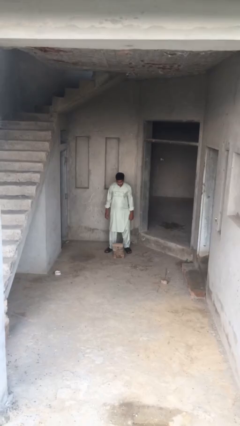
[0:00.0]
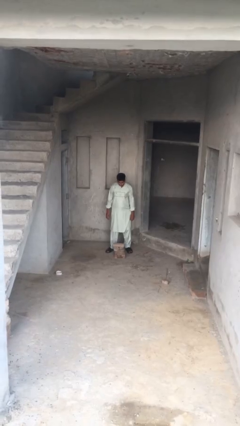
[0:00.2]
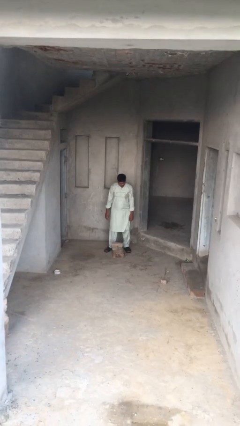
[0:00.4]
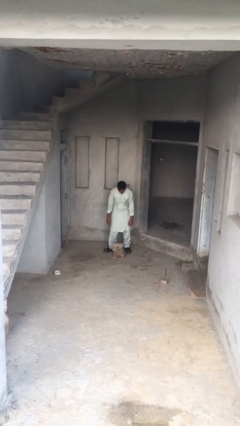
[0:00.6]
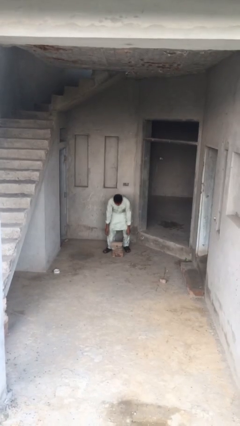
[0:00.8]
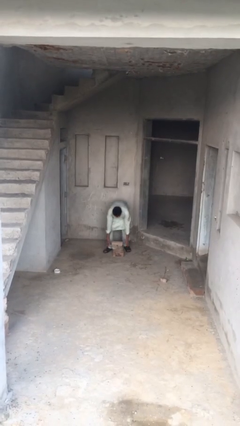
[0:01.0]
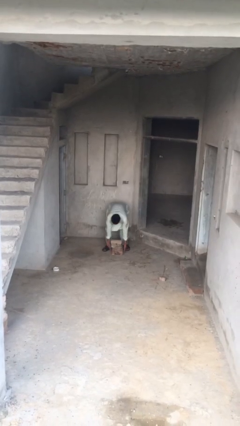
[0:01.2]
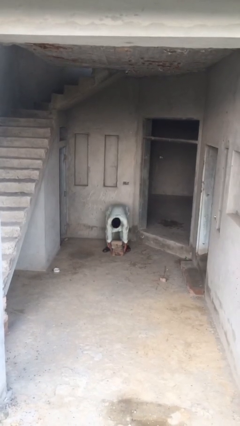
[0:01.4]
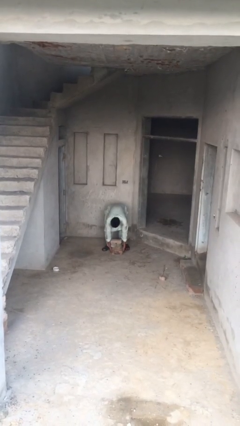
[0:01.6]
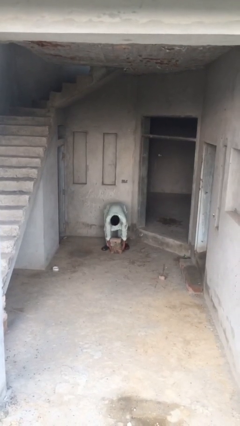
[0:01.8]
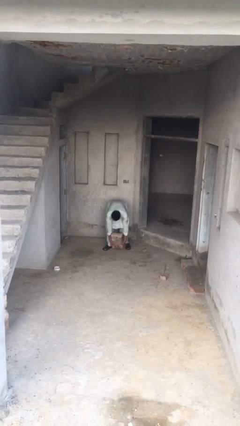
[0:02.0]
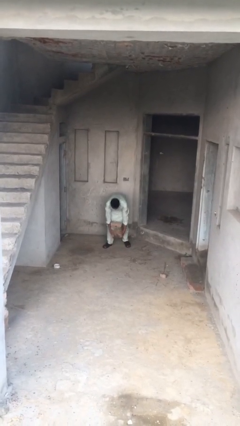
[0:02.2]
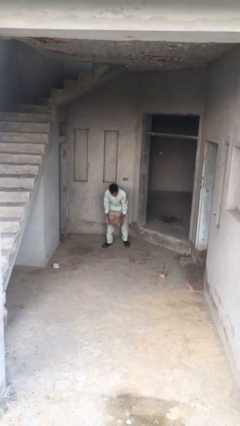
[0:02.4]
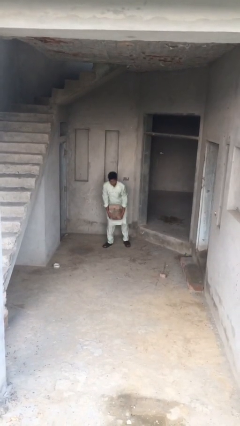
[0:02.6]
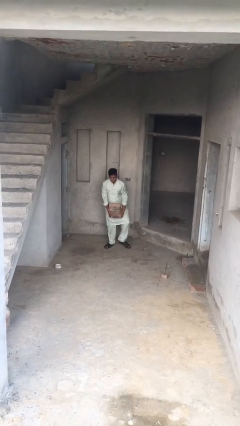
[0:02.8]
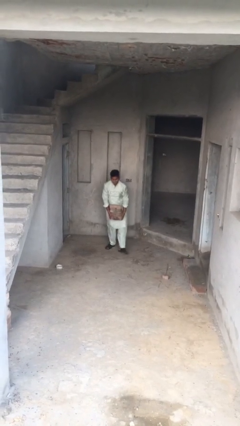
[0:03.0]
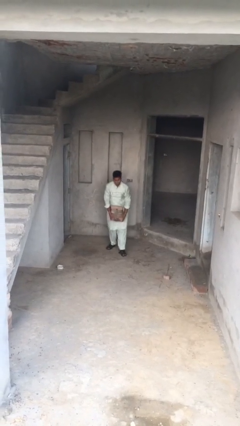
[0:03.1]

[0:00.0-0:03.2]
person picks up object from floor

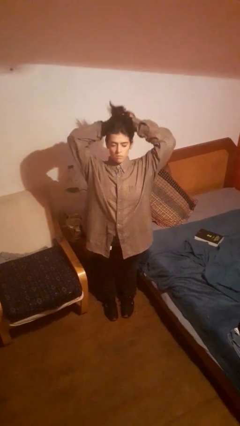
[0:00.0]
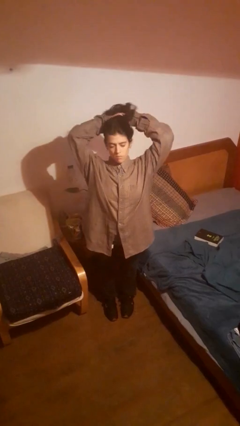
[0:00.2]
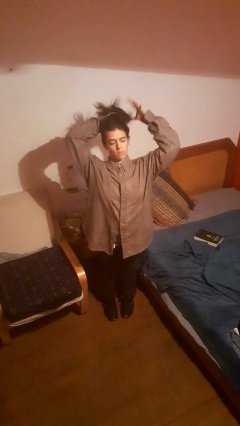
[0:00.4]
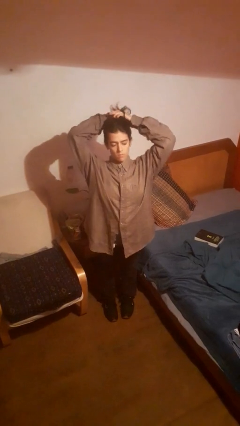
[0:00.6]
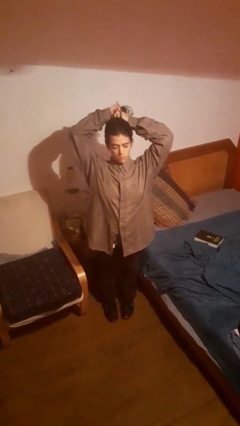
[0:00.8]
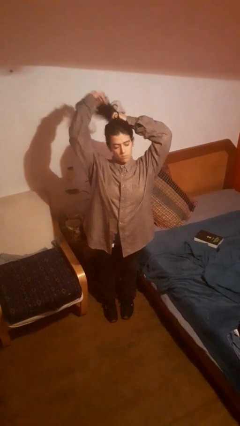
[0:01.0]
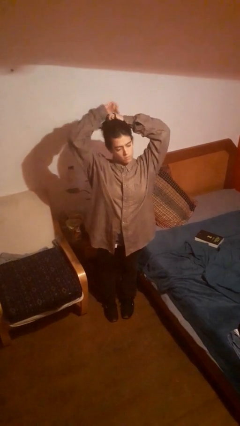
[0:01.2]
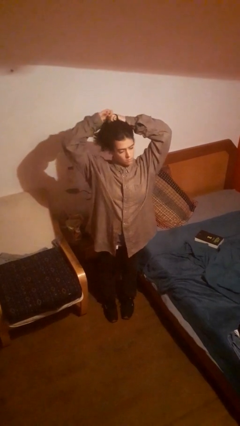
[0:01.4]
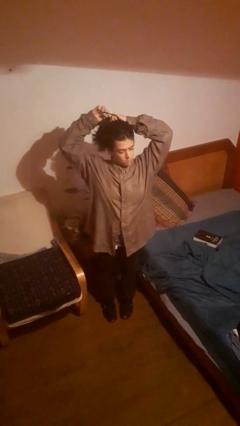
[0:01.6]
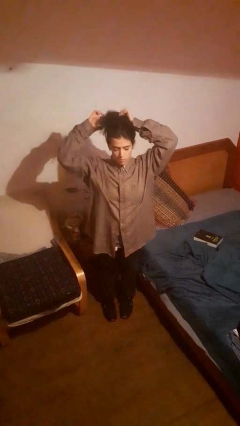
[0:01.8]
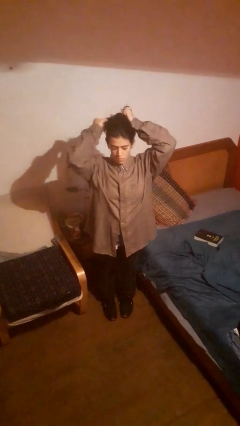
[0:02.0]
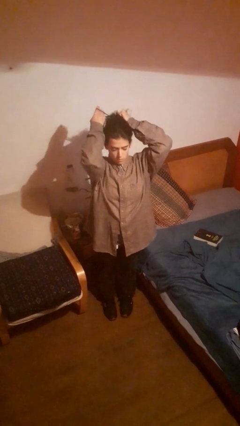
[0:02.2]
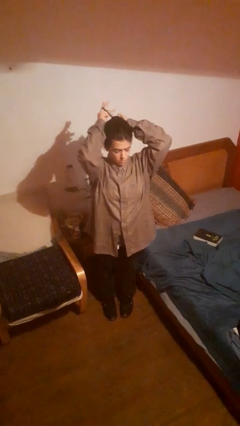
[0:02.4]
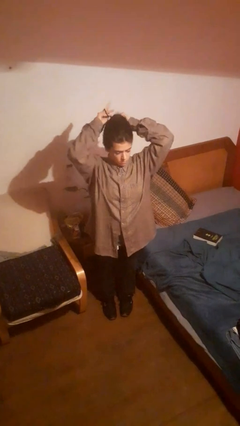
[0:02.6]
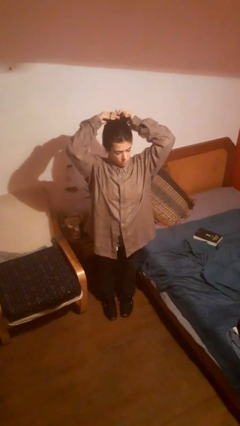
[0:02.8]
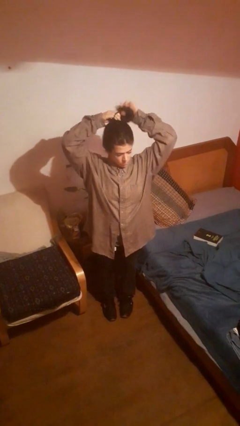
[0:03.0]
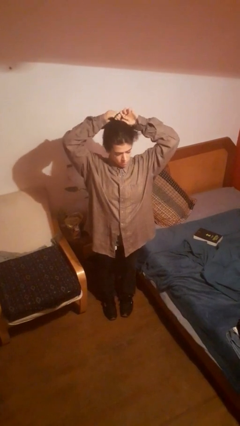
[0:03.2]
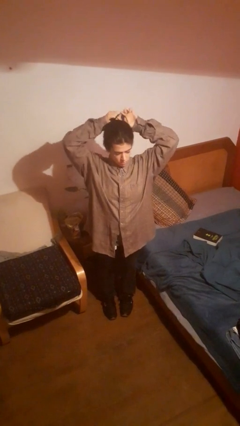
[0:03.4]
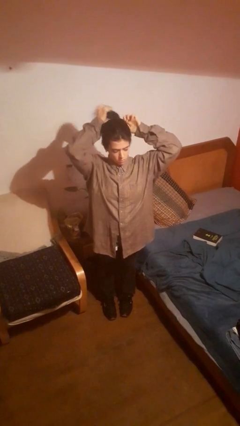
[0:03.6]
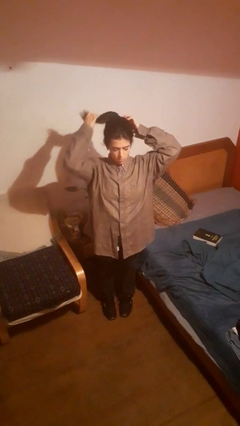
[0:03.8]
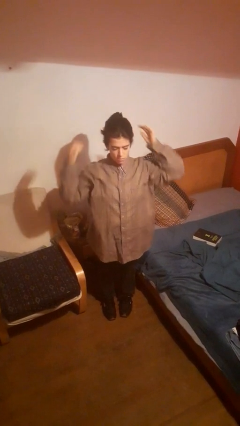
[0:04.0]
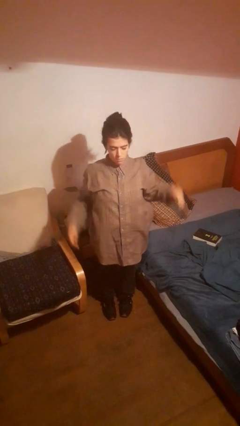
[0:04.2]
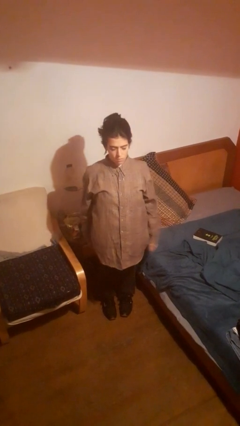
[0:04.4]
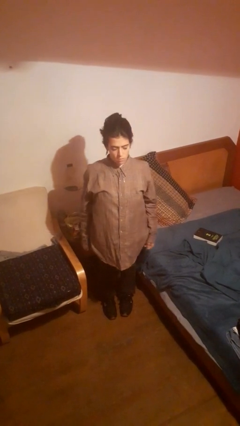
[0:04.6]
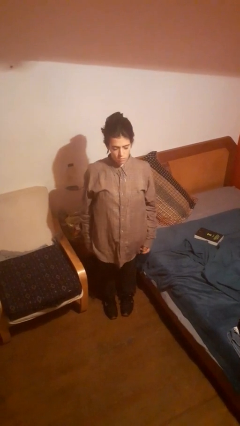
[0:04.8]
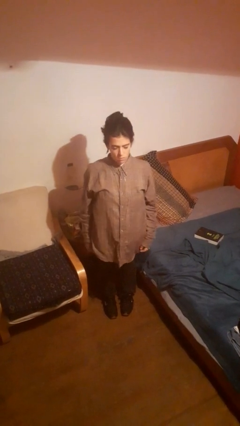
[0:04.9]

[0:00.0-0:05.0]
person puts hair in ponytail

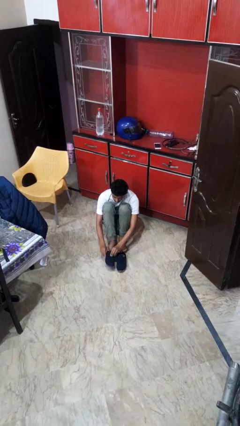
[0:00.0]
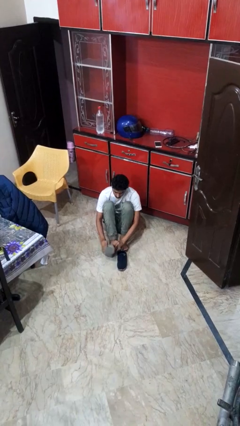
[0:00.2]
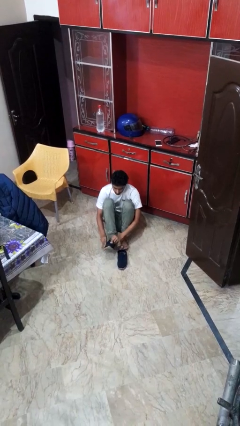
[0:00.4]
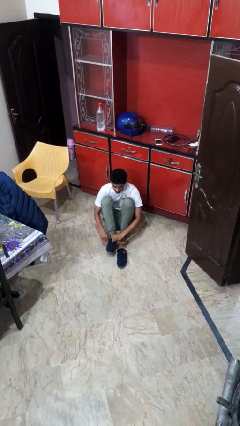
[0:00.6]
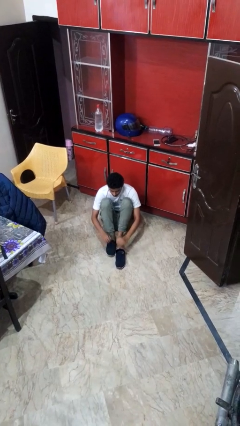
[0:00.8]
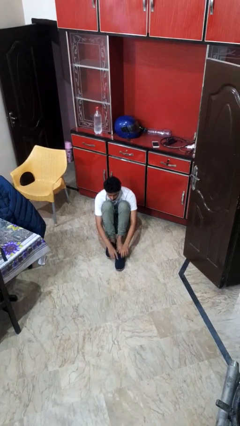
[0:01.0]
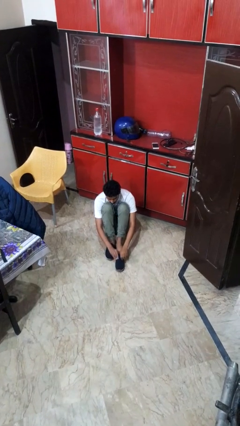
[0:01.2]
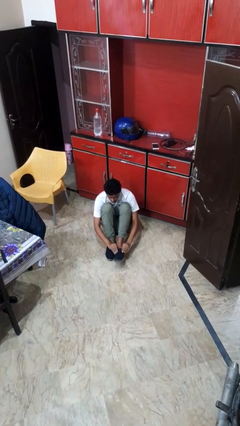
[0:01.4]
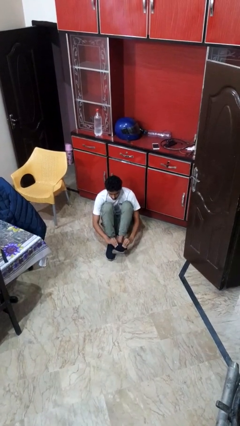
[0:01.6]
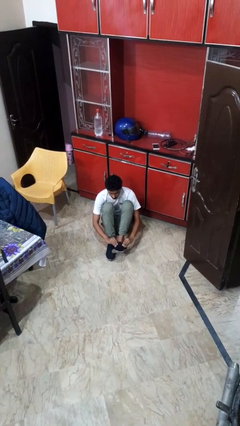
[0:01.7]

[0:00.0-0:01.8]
person puts on shoes

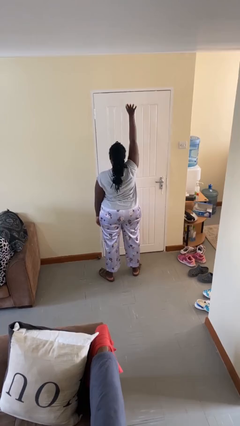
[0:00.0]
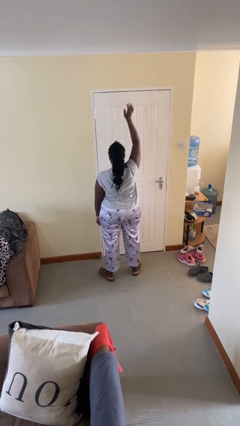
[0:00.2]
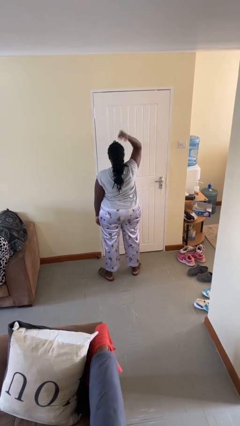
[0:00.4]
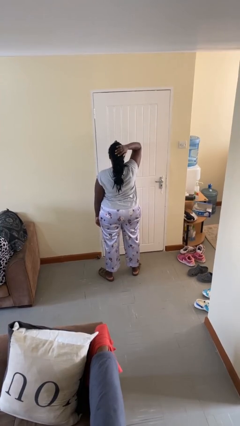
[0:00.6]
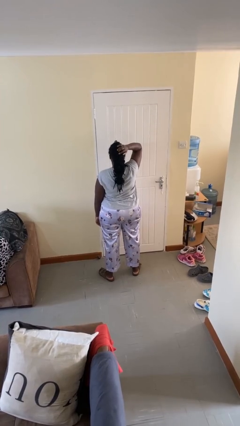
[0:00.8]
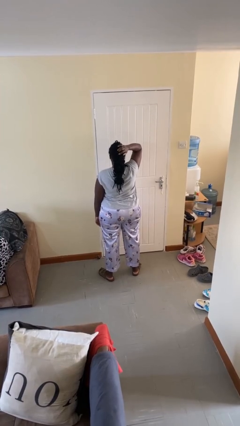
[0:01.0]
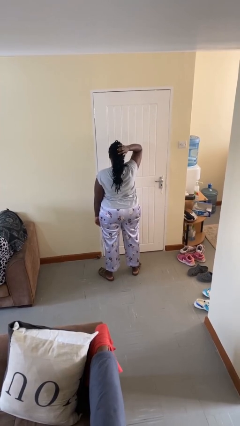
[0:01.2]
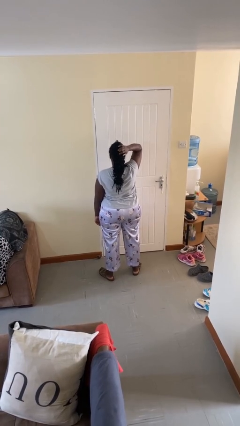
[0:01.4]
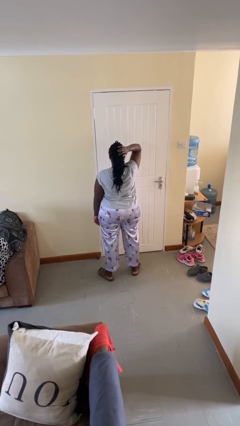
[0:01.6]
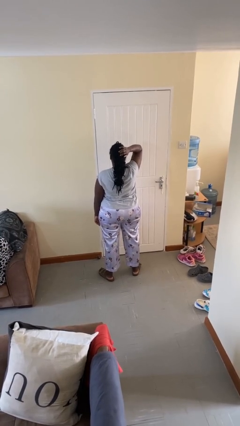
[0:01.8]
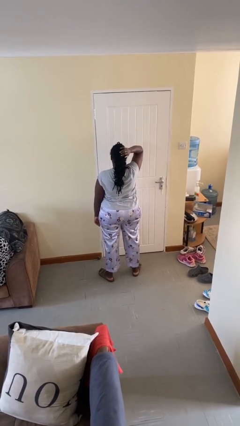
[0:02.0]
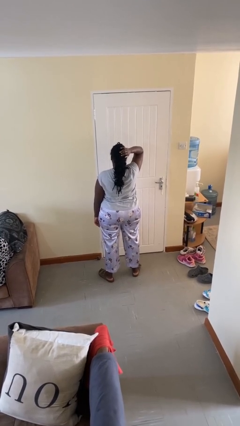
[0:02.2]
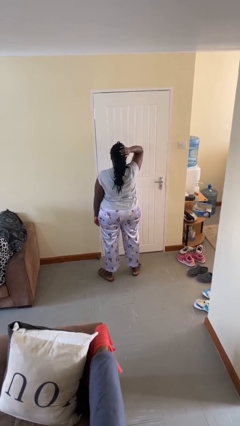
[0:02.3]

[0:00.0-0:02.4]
person gestures lower hand

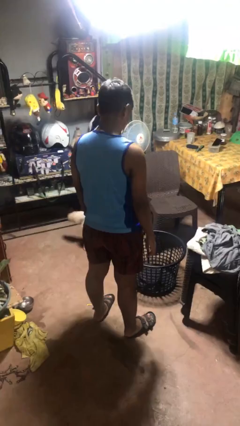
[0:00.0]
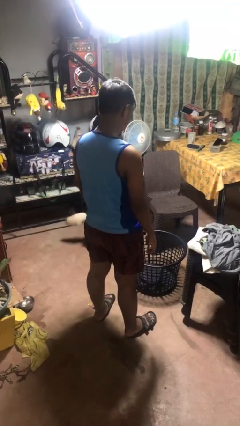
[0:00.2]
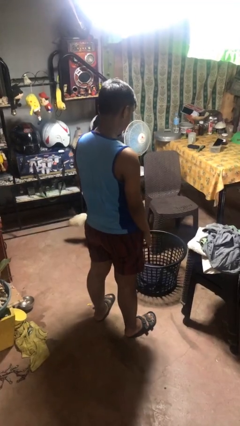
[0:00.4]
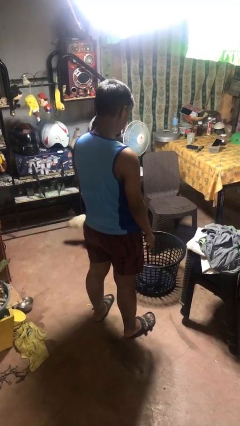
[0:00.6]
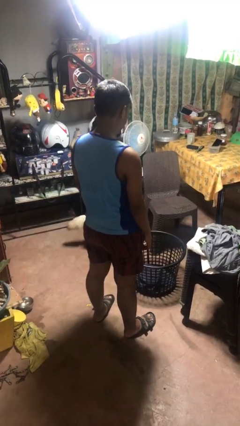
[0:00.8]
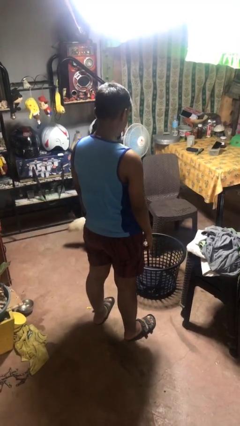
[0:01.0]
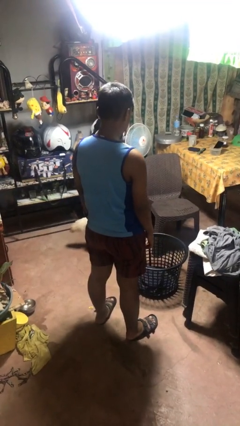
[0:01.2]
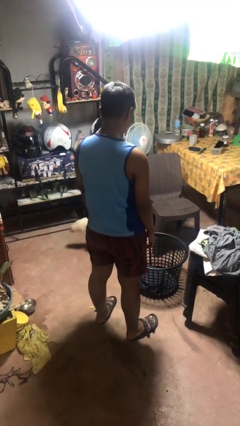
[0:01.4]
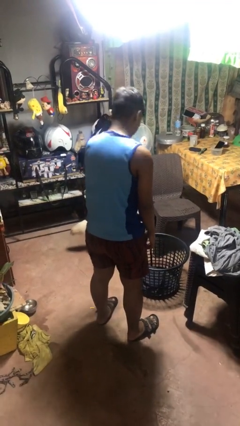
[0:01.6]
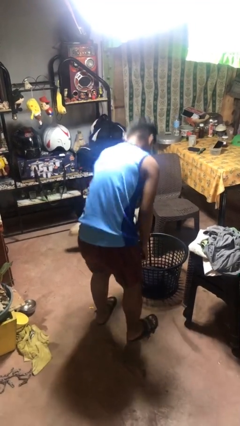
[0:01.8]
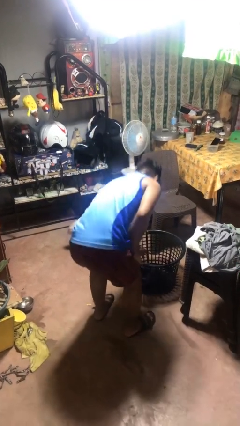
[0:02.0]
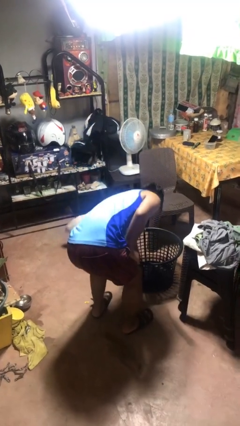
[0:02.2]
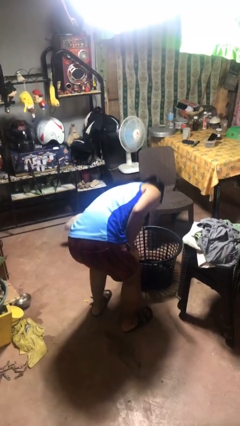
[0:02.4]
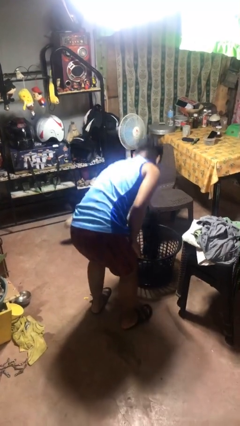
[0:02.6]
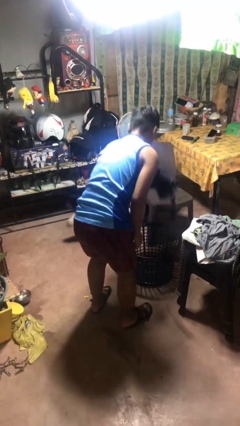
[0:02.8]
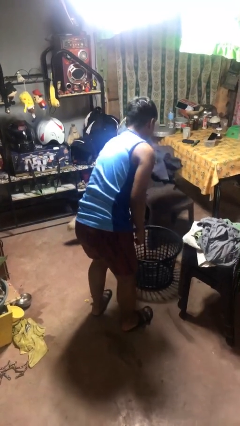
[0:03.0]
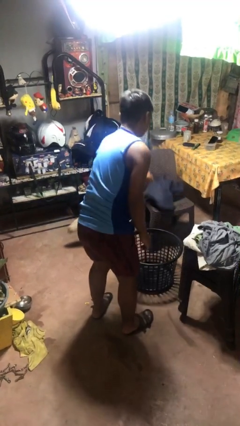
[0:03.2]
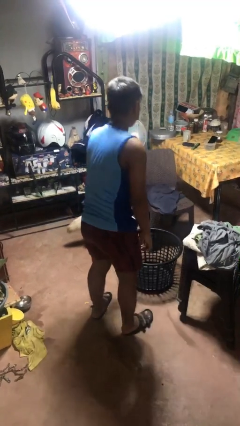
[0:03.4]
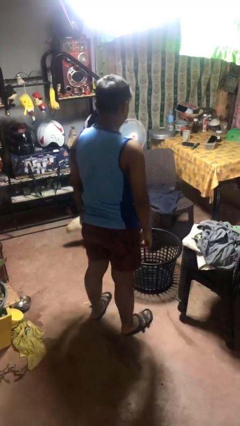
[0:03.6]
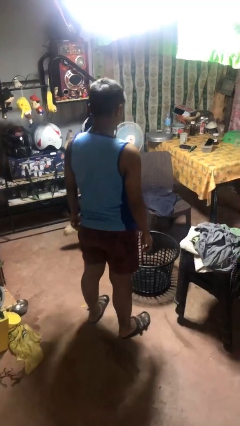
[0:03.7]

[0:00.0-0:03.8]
person takes object from basket

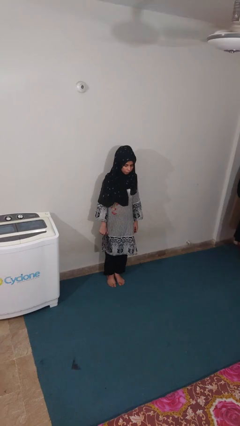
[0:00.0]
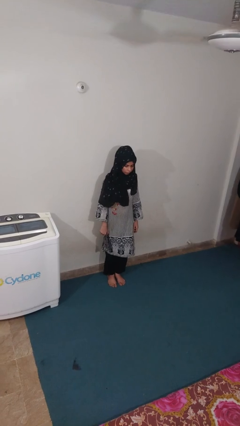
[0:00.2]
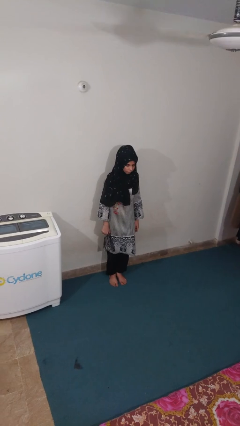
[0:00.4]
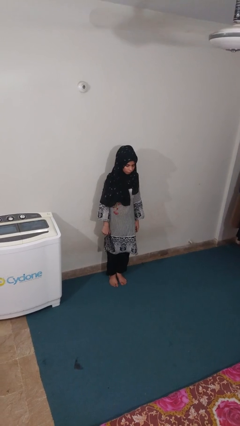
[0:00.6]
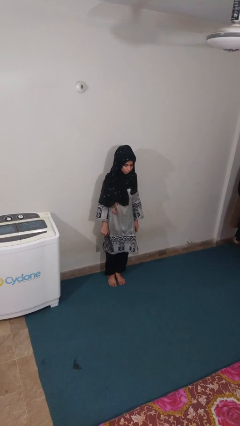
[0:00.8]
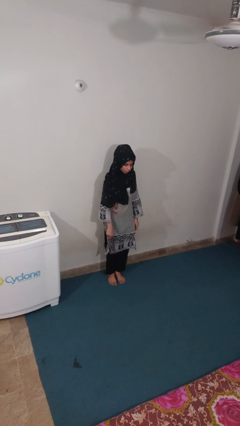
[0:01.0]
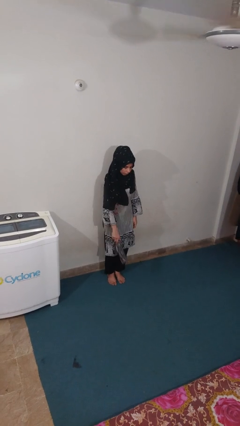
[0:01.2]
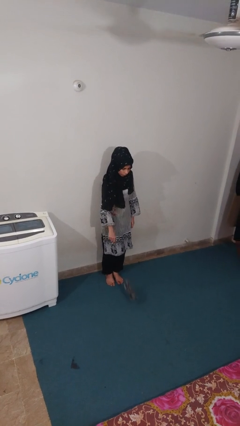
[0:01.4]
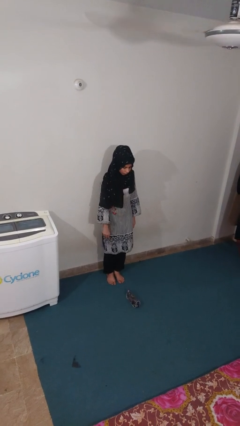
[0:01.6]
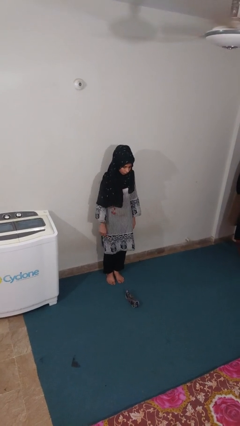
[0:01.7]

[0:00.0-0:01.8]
person throws object to ground
